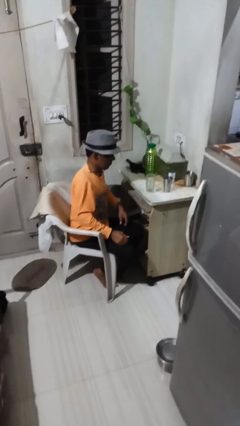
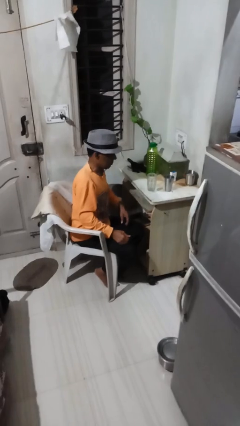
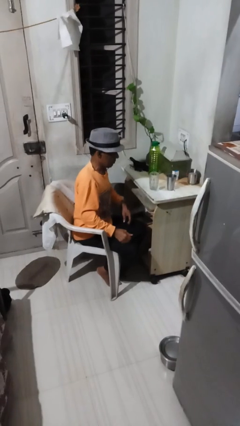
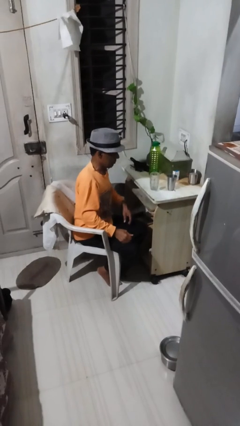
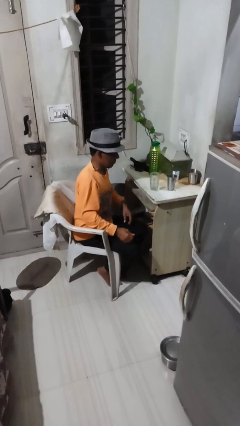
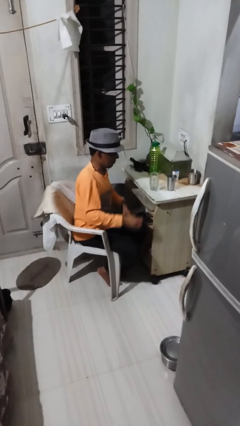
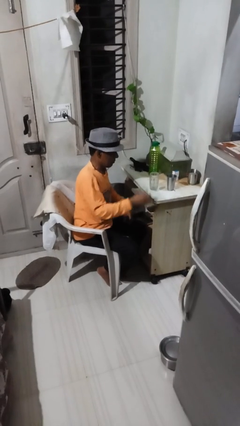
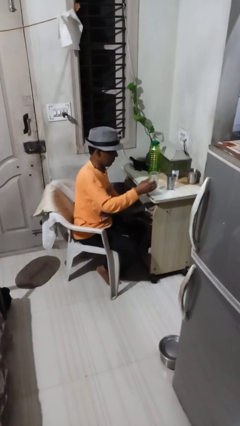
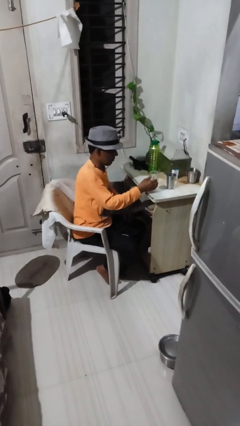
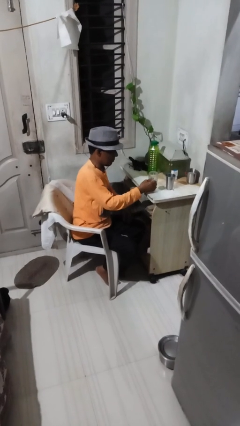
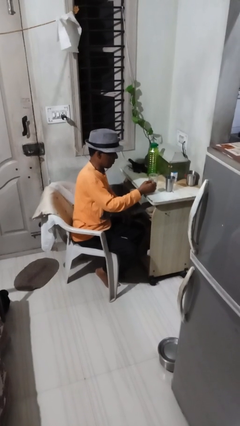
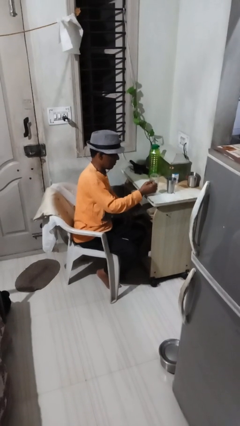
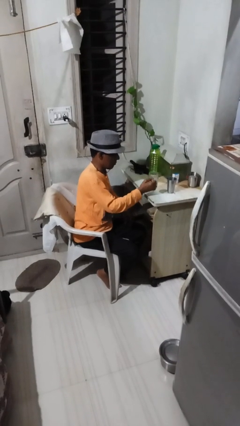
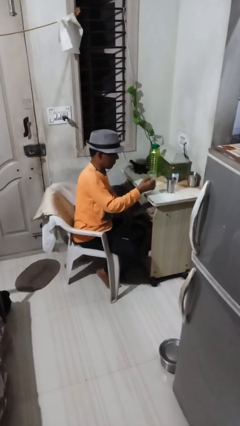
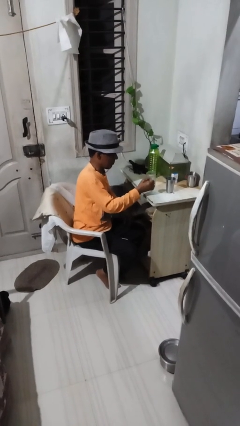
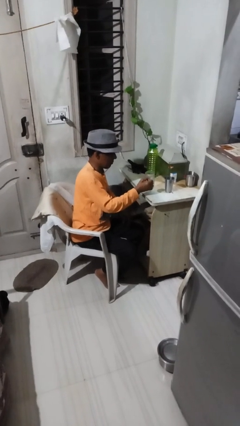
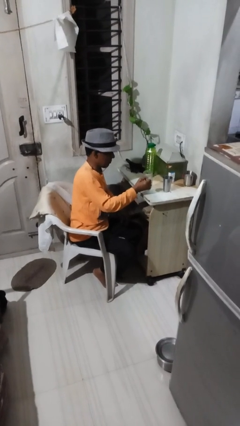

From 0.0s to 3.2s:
person picks up object from table

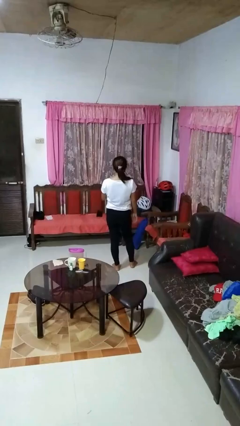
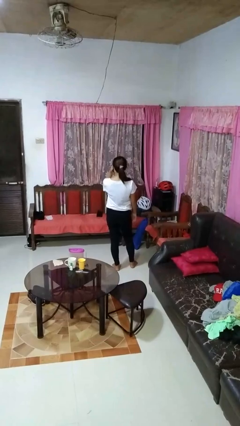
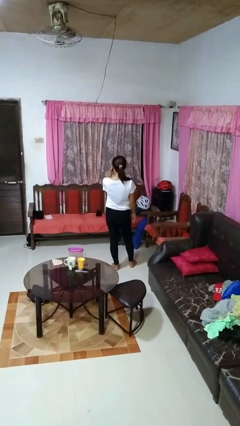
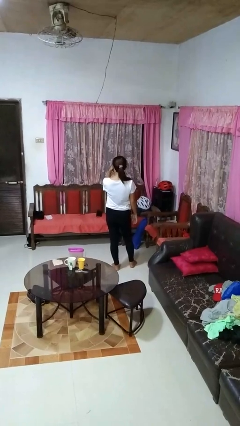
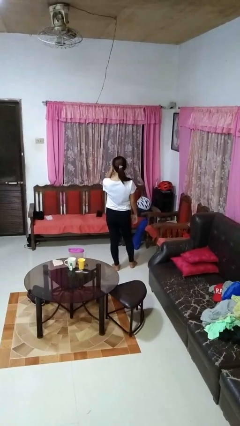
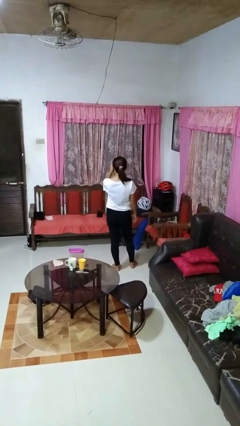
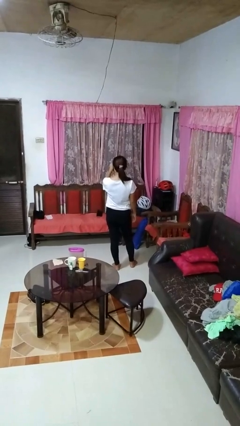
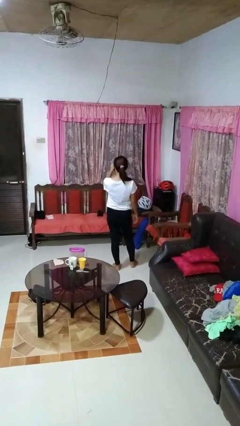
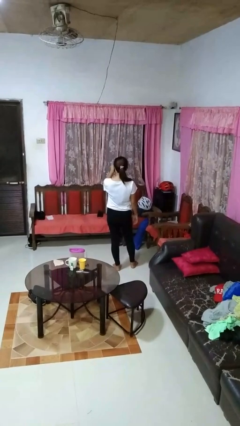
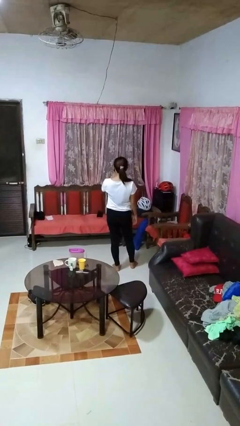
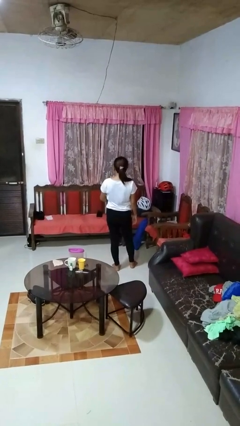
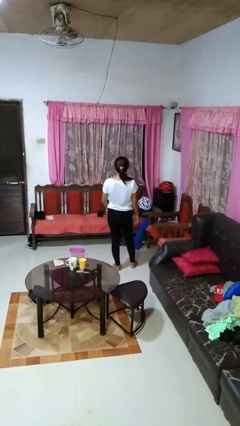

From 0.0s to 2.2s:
person gestures watch closely

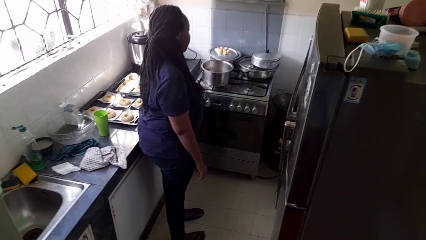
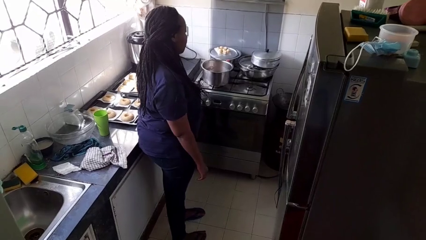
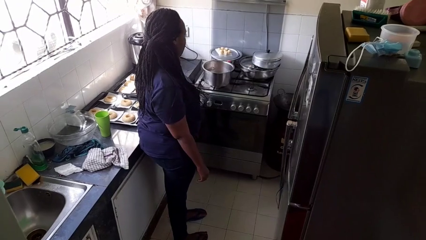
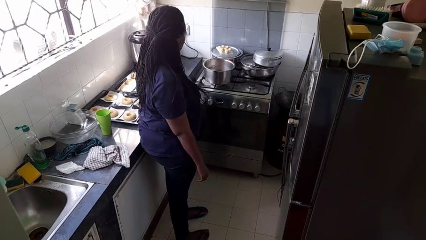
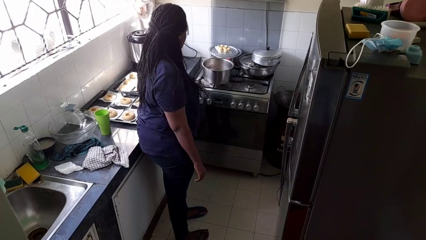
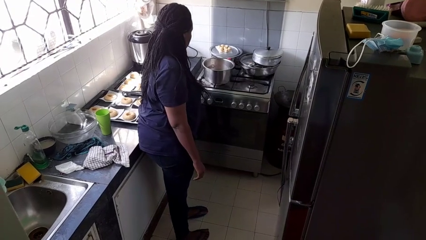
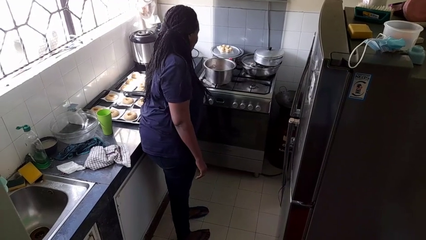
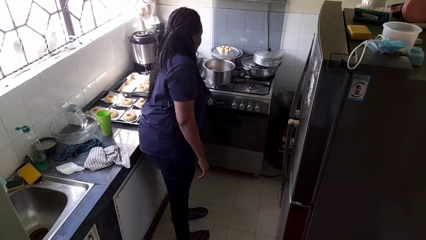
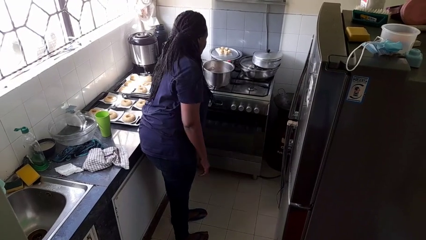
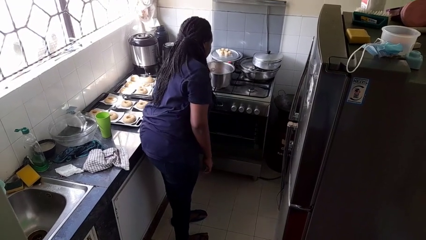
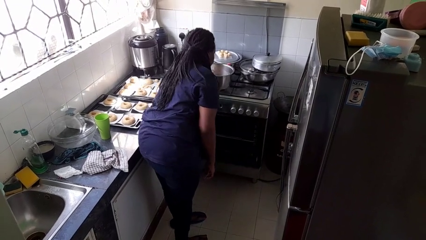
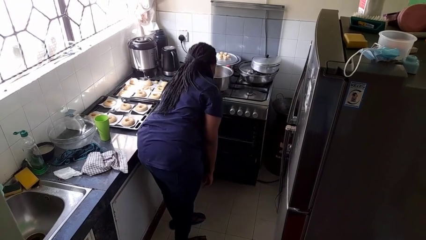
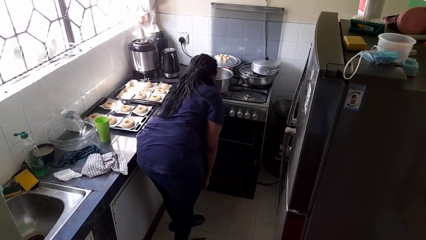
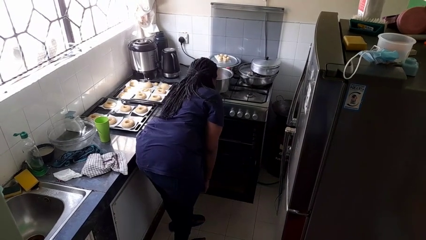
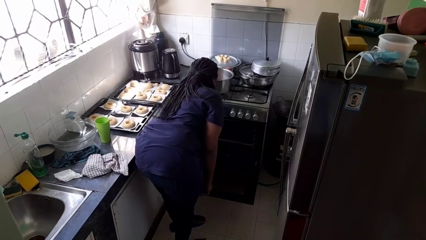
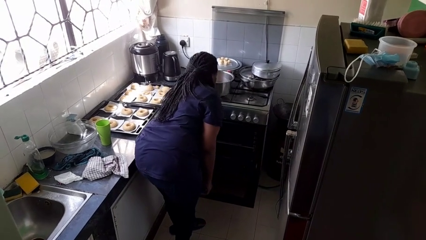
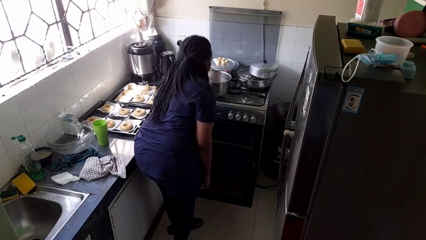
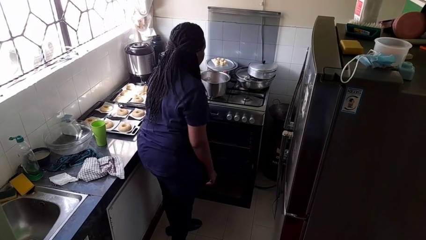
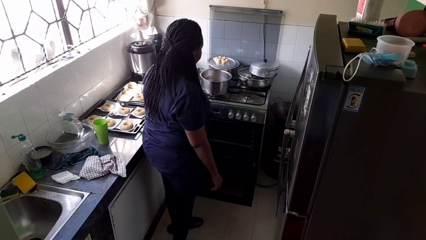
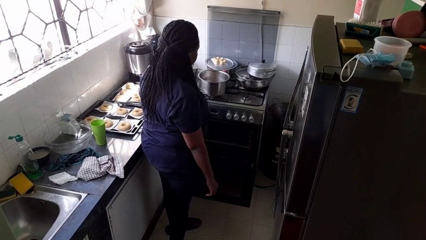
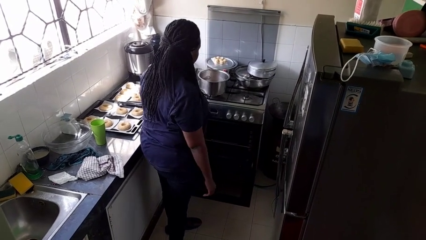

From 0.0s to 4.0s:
person opens oven door

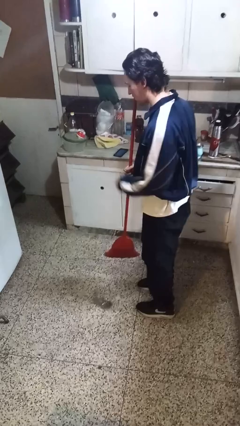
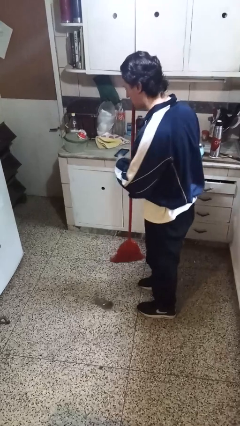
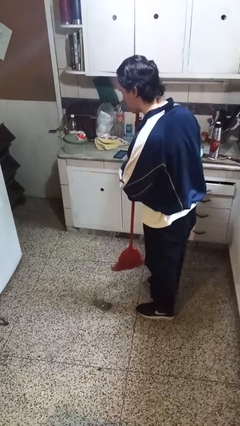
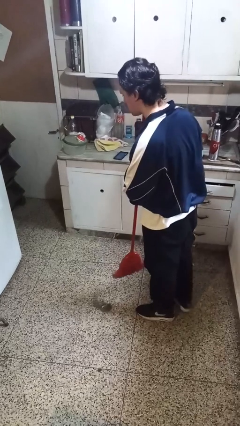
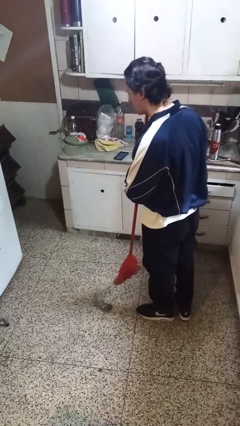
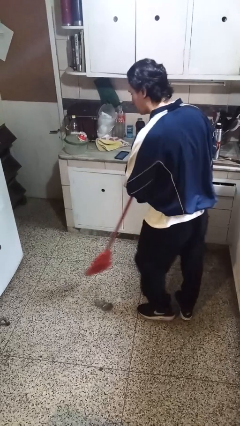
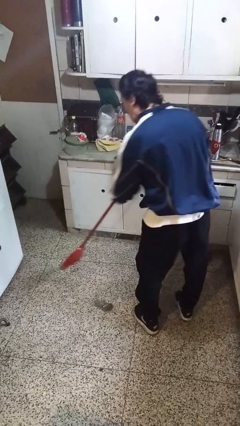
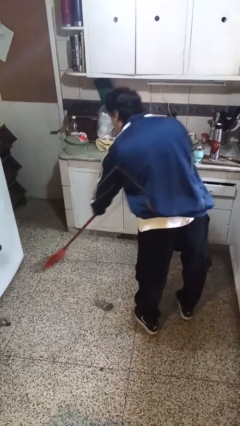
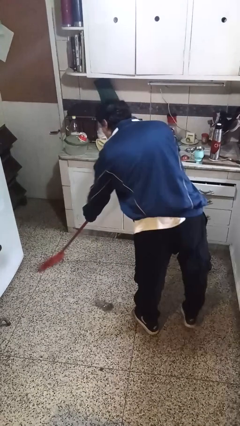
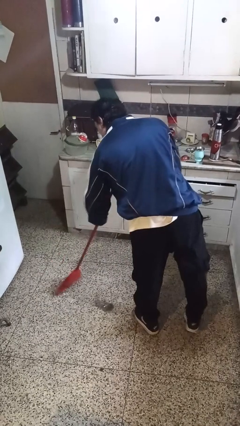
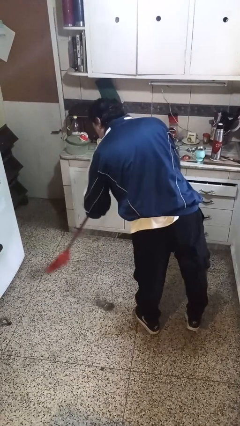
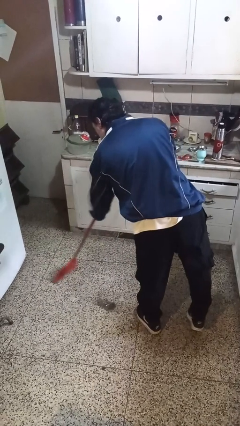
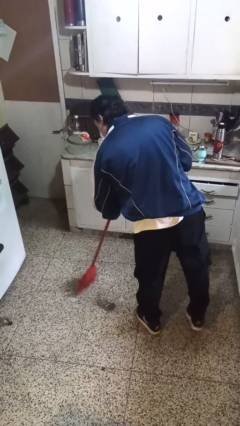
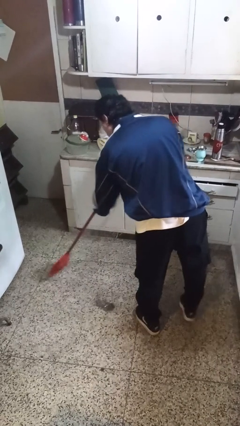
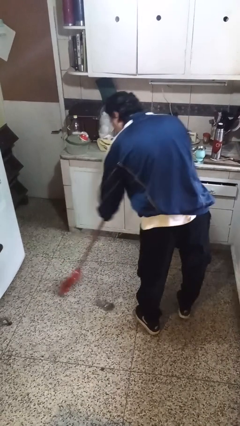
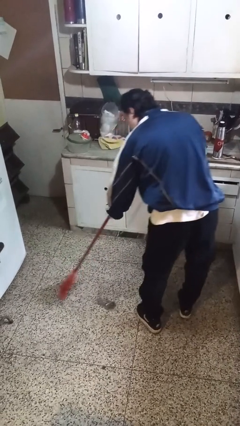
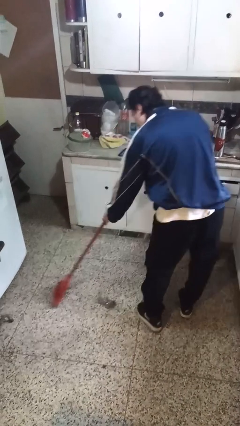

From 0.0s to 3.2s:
person sweeps floor

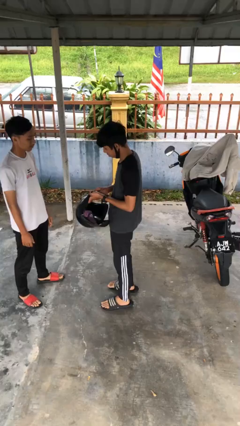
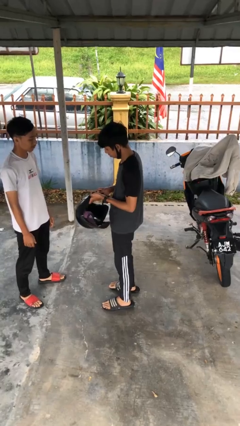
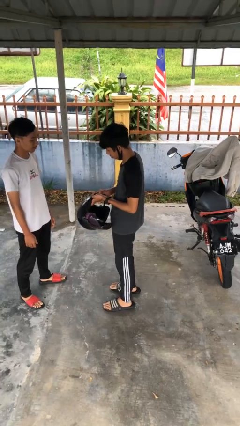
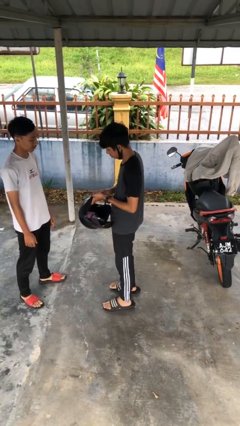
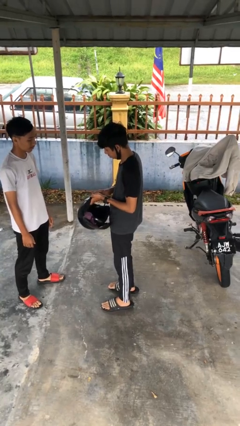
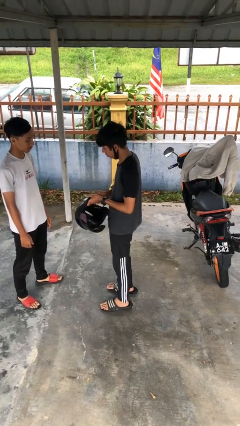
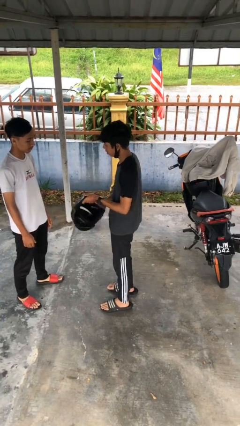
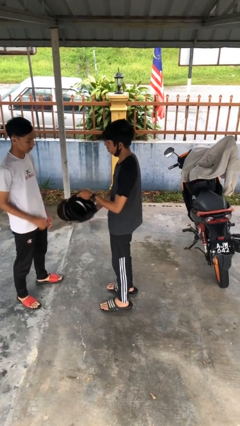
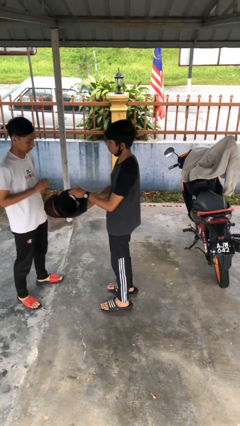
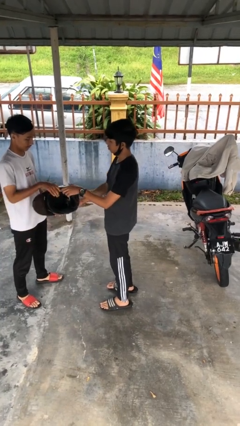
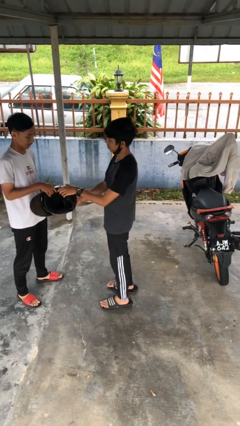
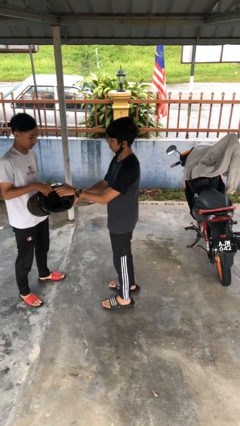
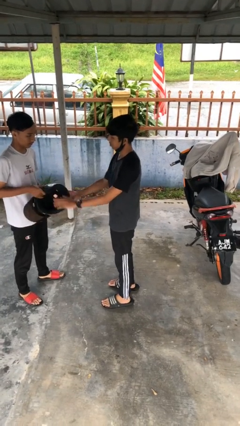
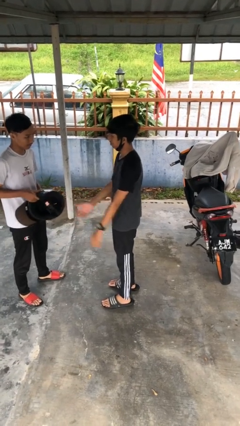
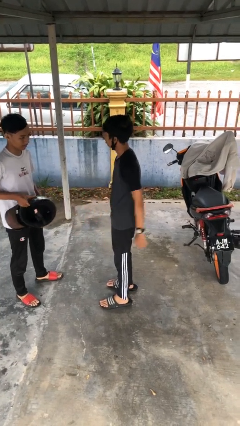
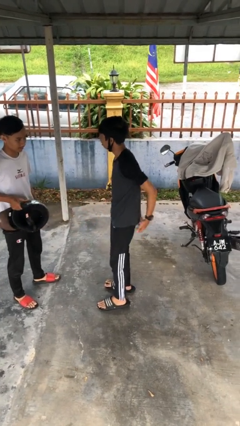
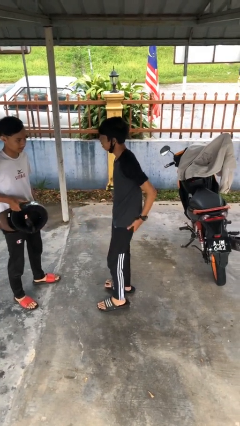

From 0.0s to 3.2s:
person transfers object to person

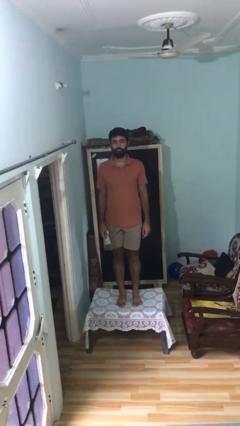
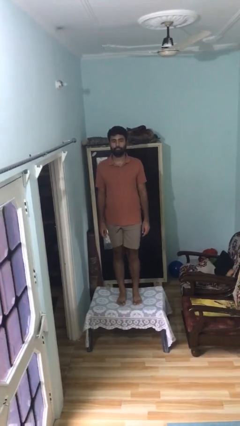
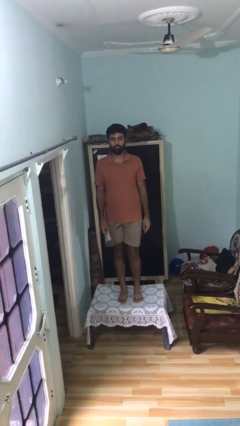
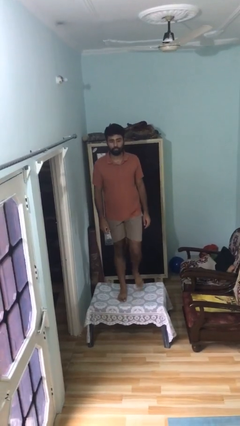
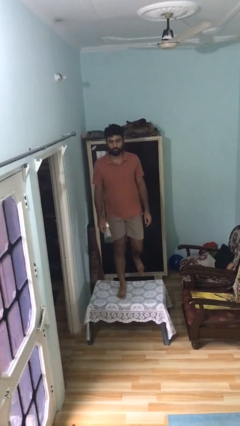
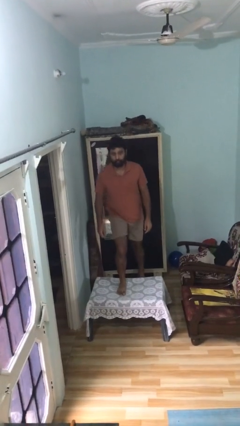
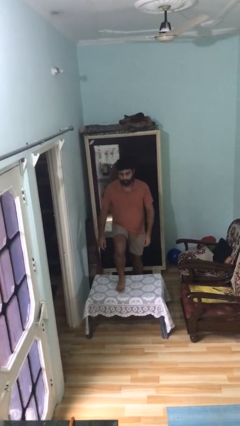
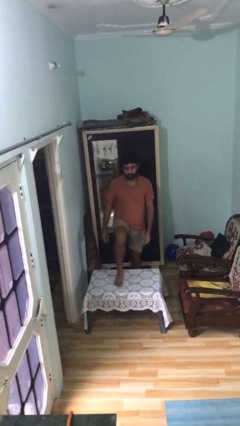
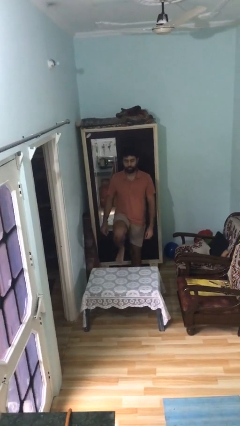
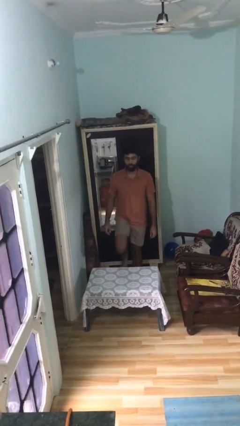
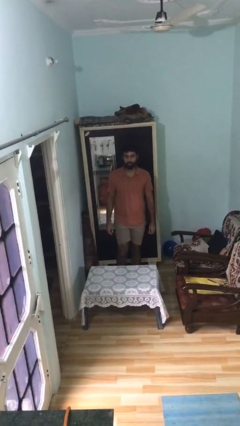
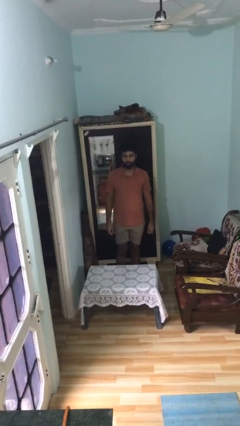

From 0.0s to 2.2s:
person climbs off table
